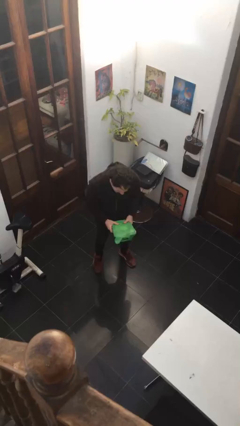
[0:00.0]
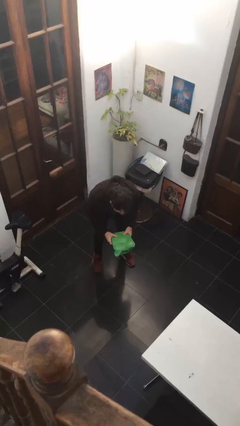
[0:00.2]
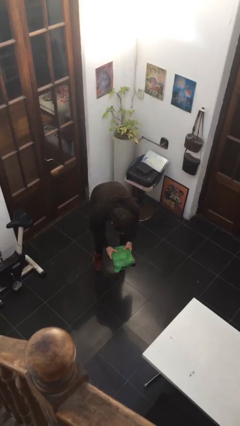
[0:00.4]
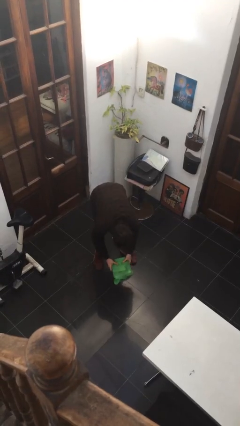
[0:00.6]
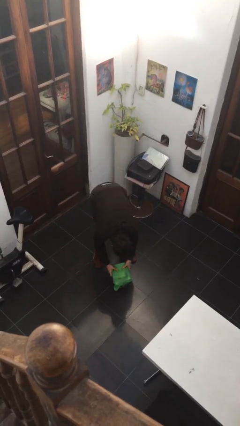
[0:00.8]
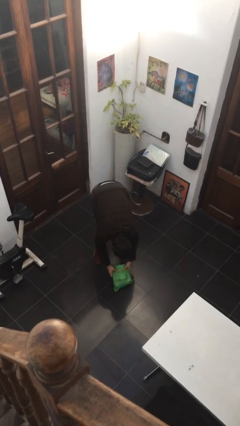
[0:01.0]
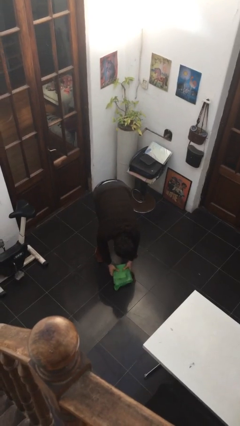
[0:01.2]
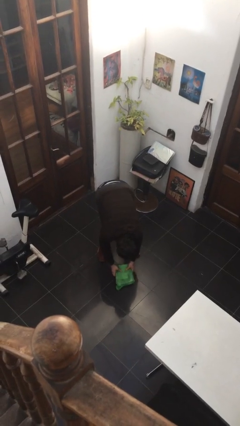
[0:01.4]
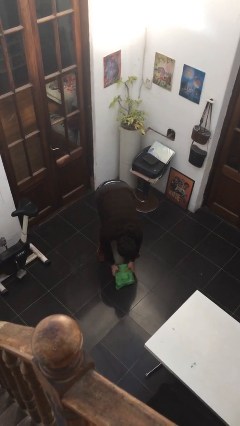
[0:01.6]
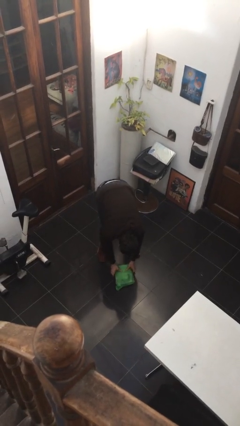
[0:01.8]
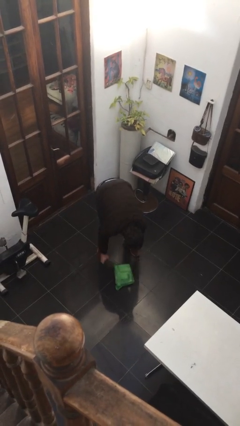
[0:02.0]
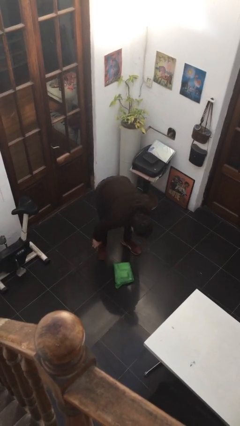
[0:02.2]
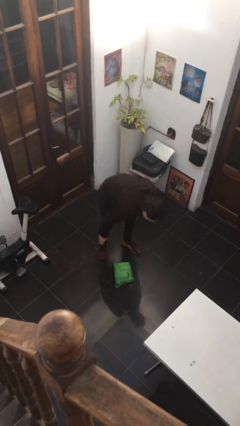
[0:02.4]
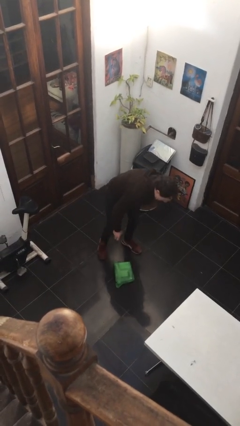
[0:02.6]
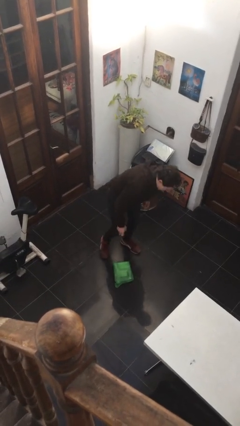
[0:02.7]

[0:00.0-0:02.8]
person puts down object on floor

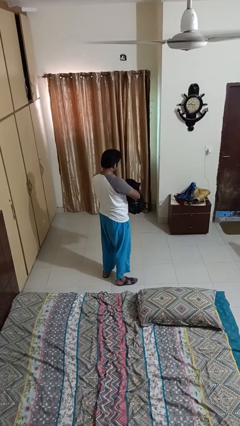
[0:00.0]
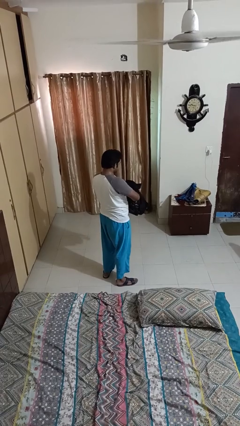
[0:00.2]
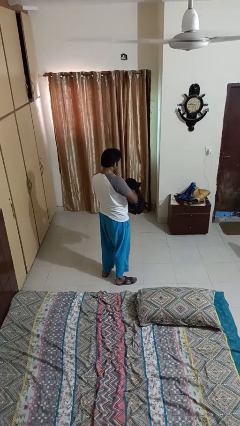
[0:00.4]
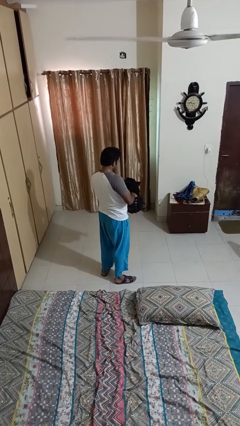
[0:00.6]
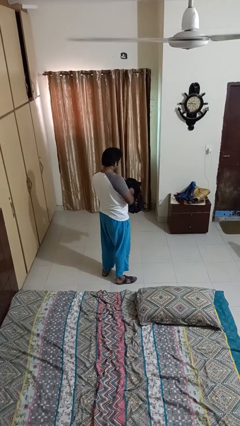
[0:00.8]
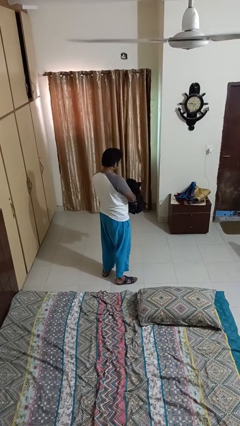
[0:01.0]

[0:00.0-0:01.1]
person lies down on couch

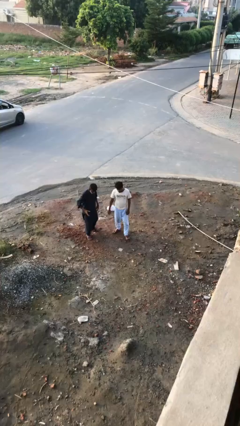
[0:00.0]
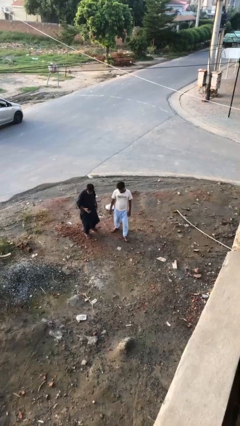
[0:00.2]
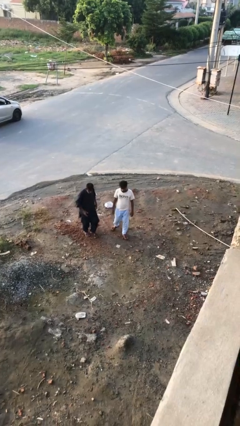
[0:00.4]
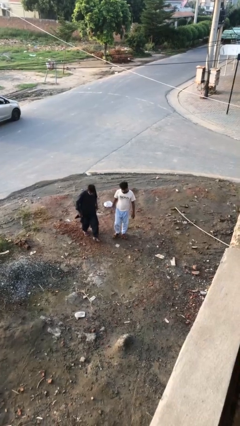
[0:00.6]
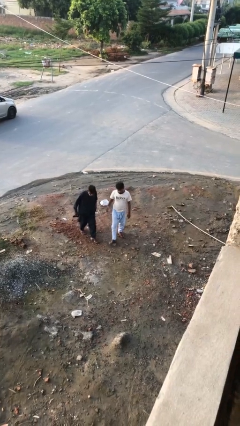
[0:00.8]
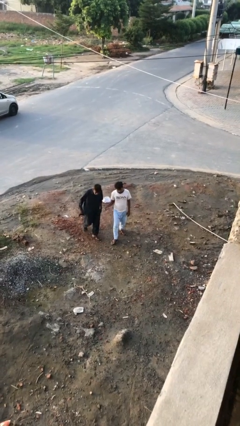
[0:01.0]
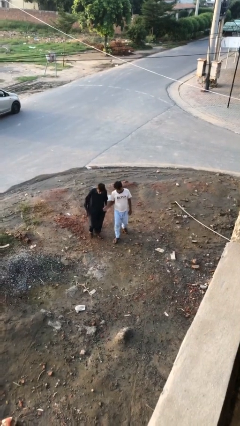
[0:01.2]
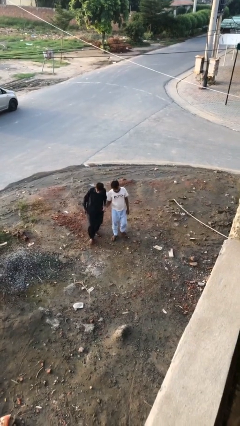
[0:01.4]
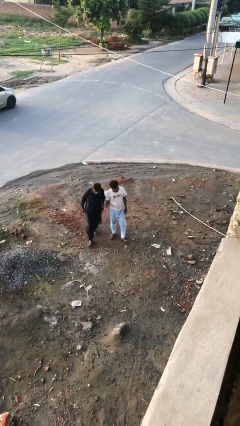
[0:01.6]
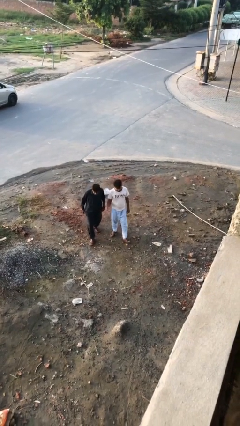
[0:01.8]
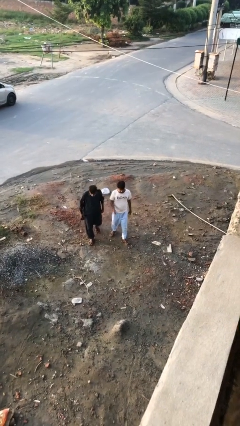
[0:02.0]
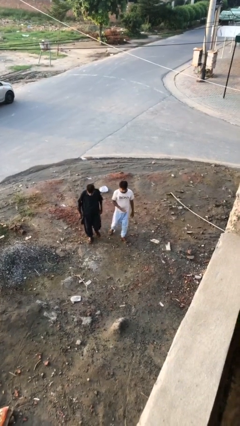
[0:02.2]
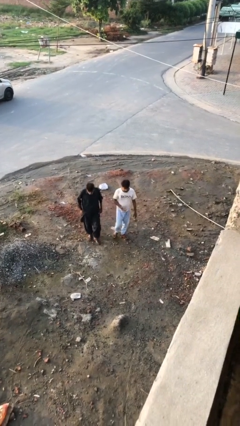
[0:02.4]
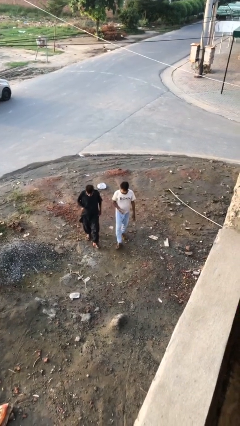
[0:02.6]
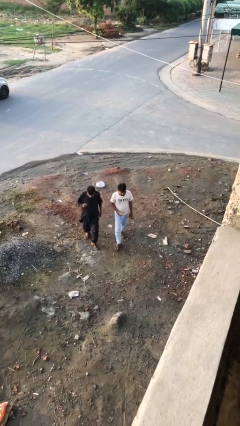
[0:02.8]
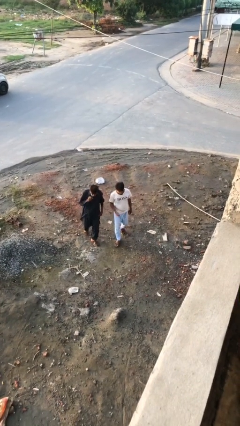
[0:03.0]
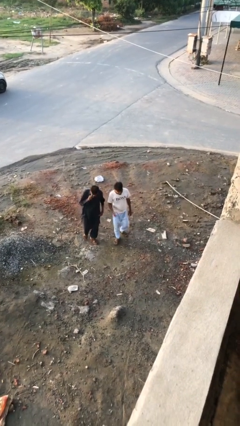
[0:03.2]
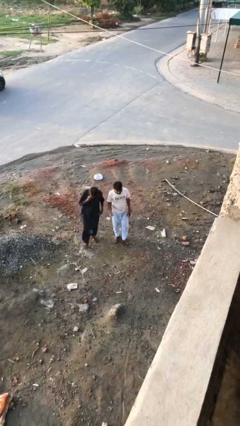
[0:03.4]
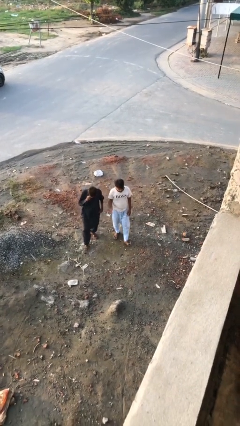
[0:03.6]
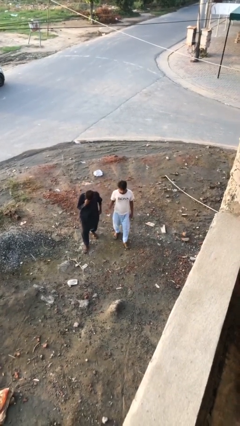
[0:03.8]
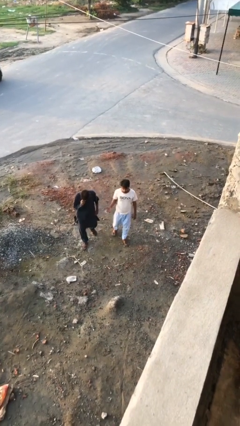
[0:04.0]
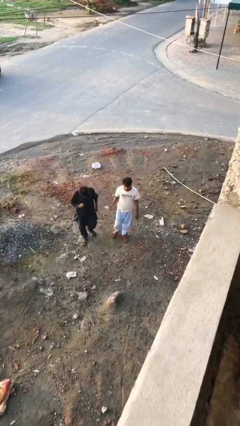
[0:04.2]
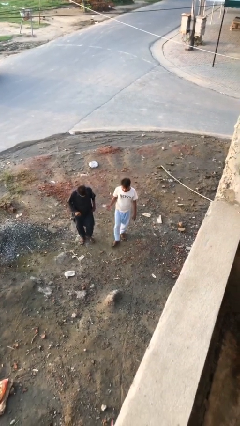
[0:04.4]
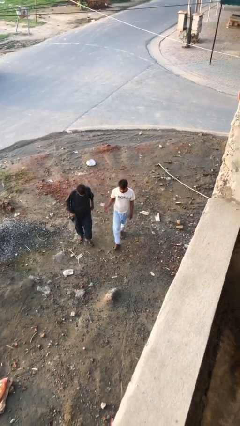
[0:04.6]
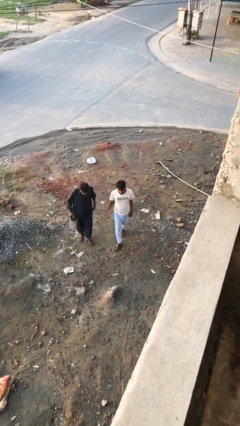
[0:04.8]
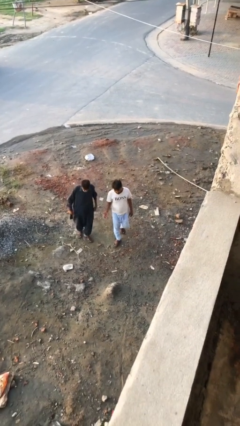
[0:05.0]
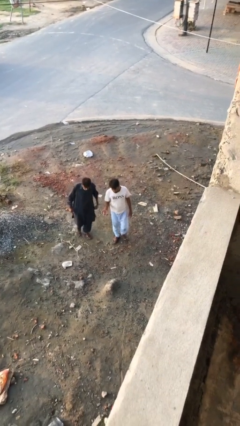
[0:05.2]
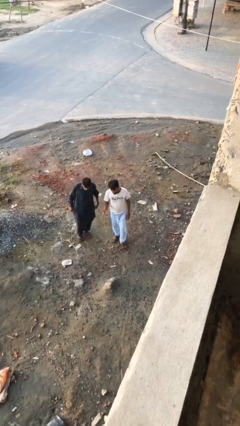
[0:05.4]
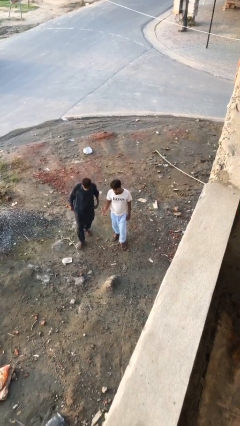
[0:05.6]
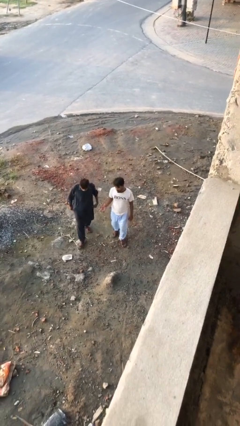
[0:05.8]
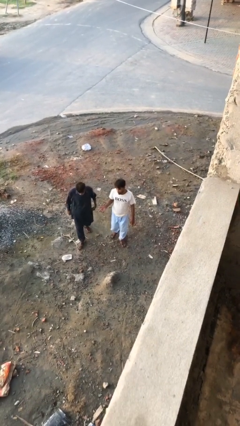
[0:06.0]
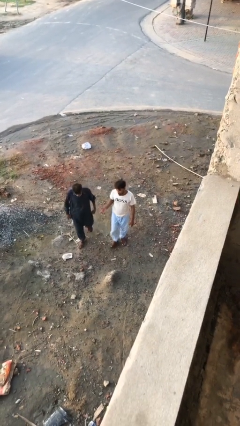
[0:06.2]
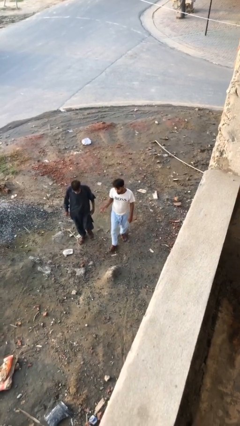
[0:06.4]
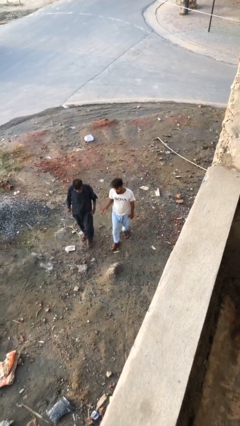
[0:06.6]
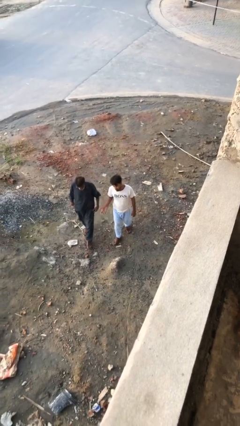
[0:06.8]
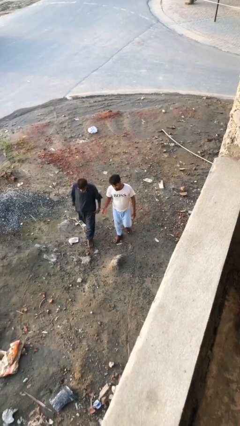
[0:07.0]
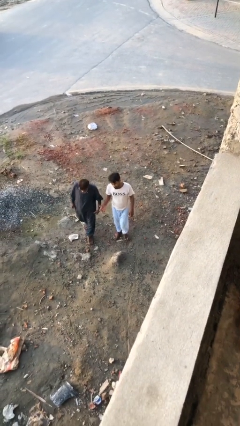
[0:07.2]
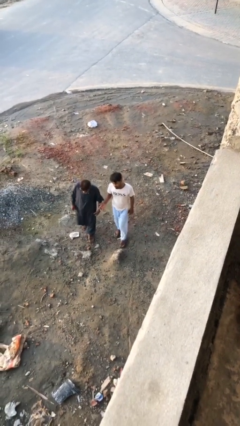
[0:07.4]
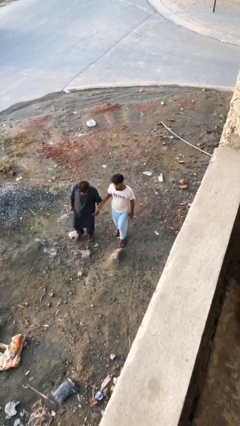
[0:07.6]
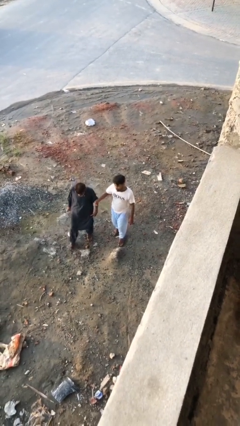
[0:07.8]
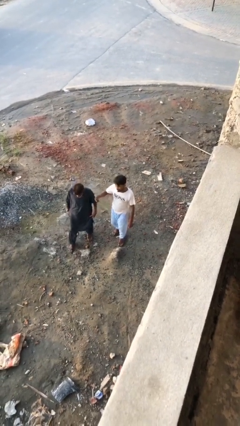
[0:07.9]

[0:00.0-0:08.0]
person talks to person

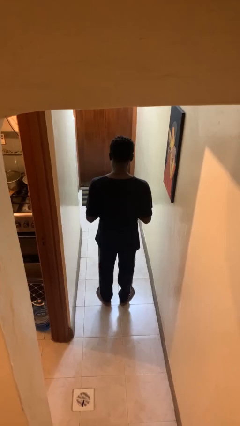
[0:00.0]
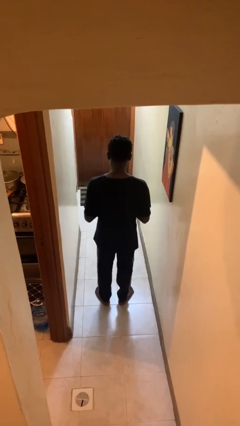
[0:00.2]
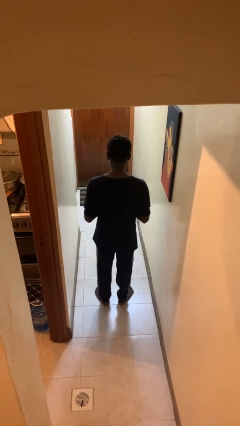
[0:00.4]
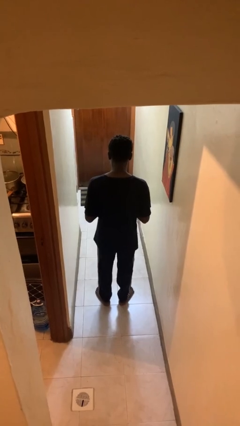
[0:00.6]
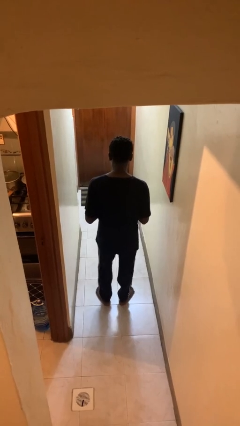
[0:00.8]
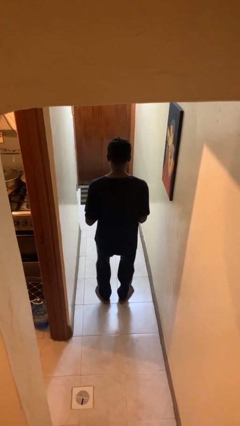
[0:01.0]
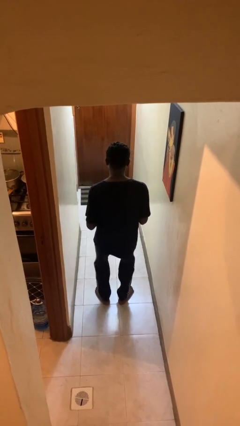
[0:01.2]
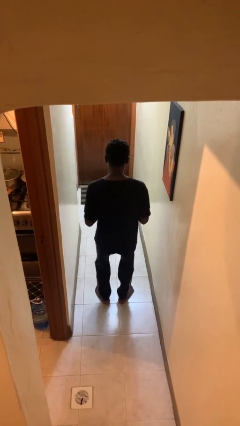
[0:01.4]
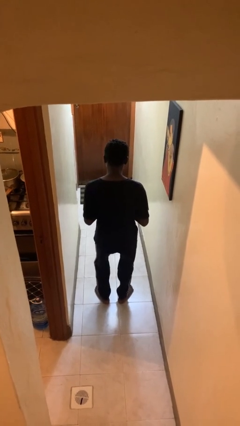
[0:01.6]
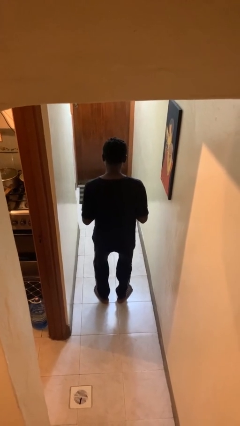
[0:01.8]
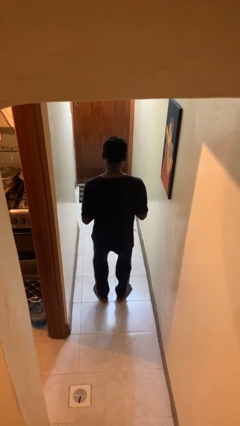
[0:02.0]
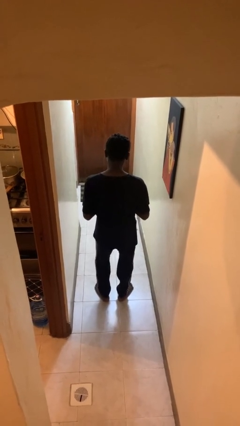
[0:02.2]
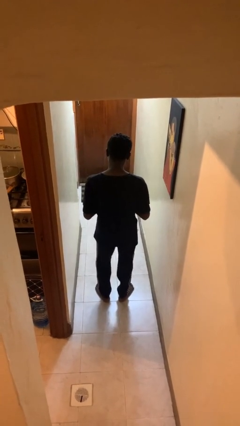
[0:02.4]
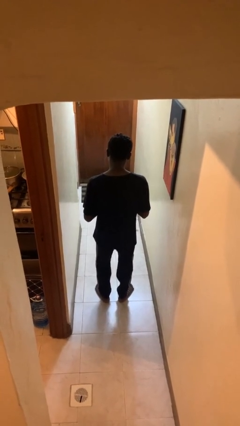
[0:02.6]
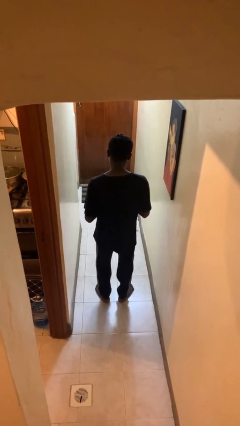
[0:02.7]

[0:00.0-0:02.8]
person dances in place

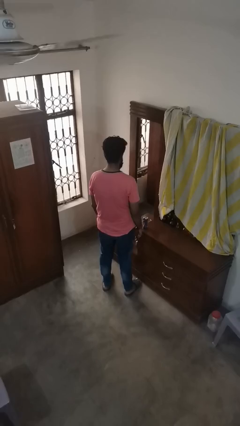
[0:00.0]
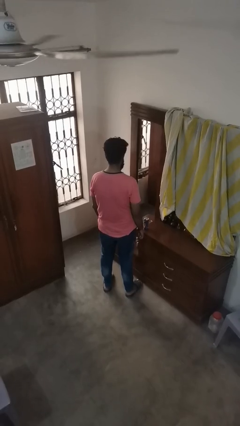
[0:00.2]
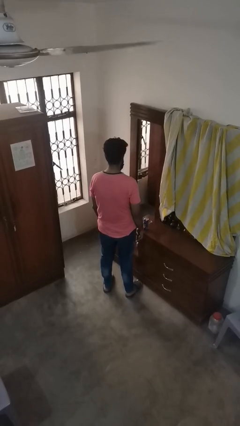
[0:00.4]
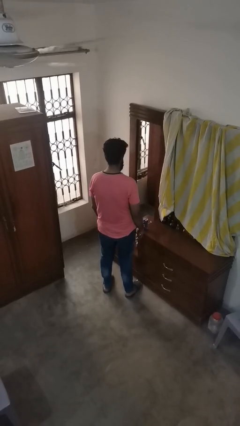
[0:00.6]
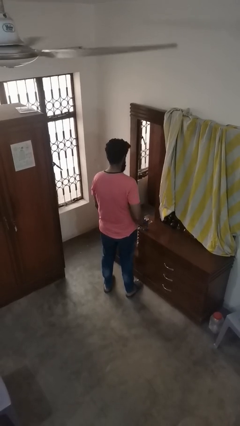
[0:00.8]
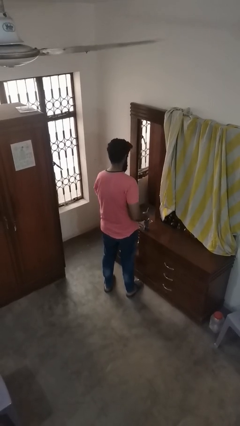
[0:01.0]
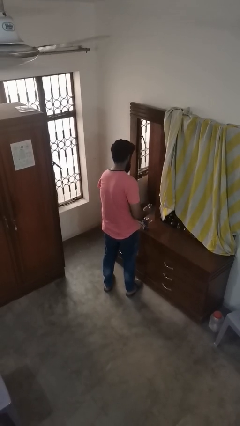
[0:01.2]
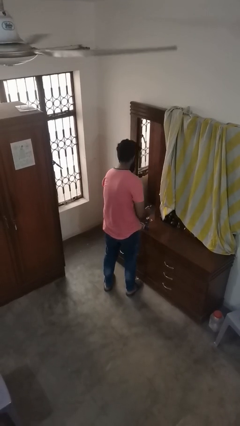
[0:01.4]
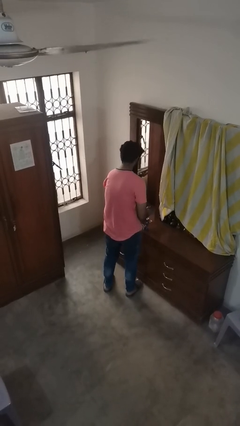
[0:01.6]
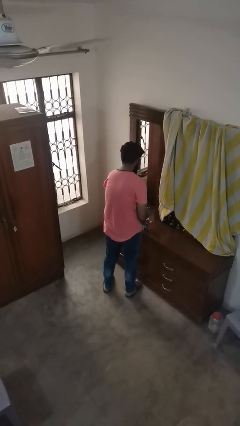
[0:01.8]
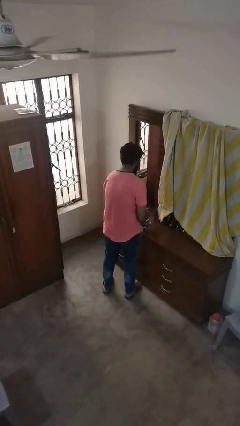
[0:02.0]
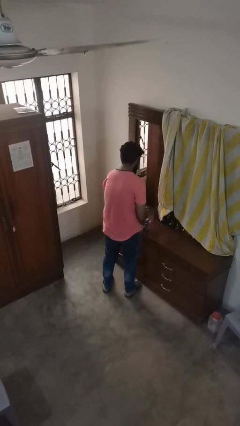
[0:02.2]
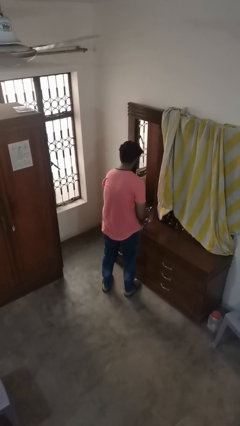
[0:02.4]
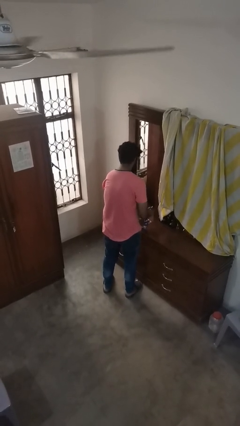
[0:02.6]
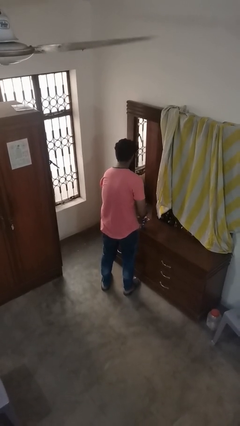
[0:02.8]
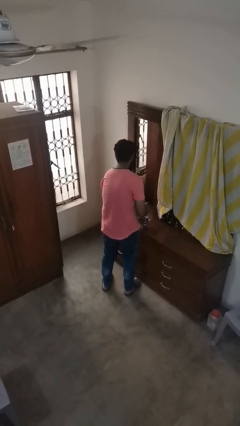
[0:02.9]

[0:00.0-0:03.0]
person opens can with can opener
